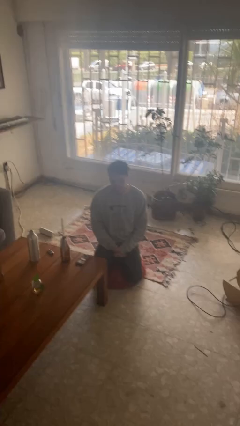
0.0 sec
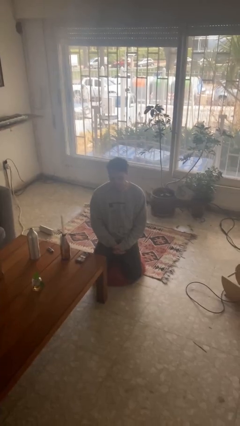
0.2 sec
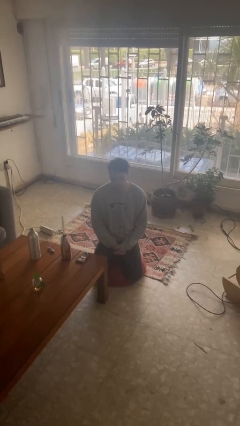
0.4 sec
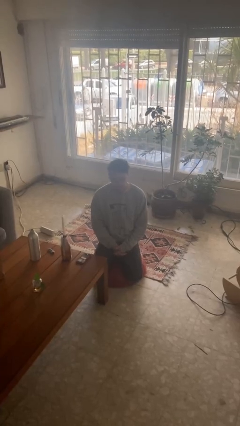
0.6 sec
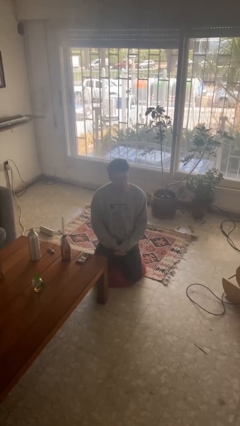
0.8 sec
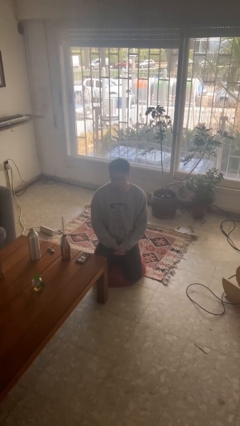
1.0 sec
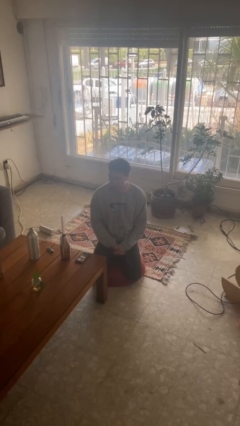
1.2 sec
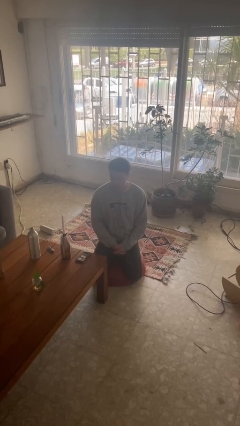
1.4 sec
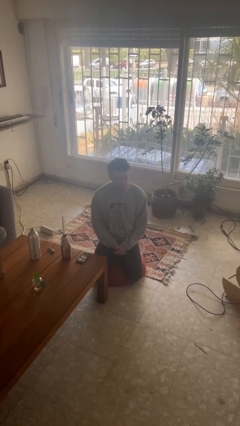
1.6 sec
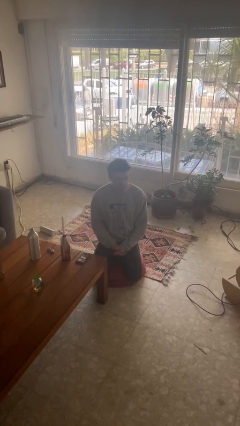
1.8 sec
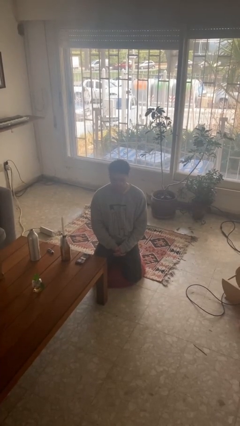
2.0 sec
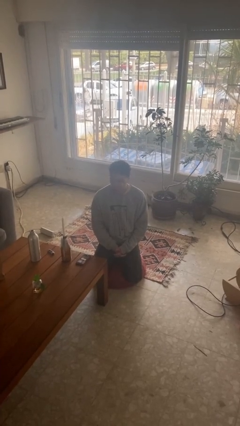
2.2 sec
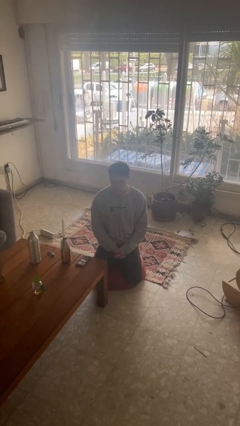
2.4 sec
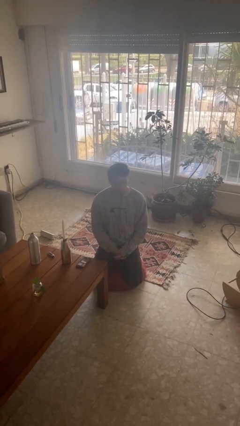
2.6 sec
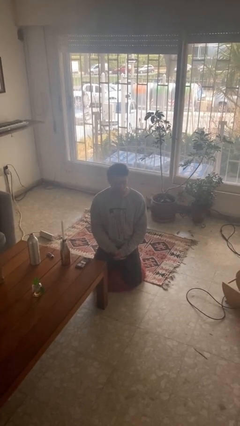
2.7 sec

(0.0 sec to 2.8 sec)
person shakes head

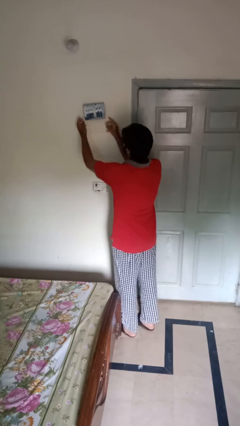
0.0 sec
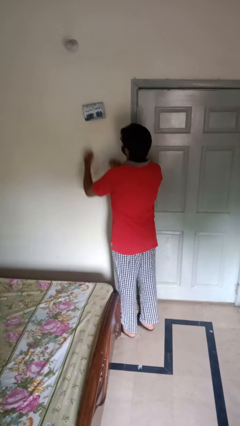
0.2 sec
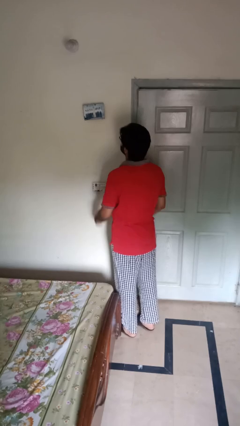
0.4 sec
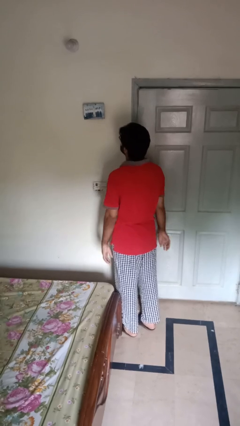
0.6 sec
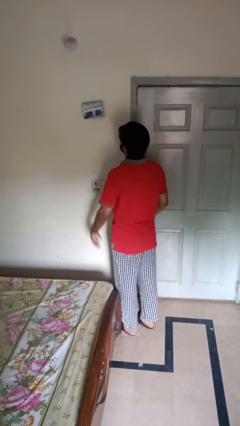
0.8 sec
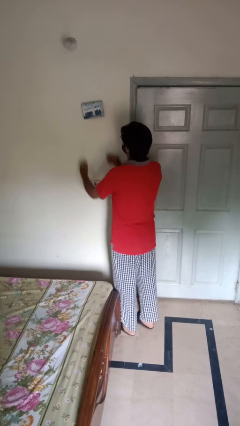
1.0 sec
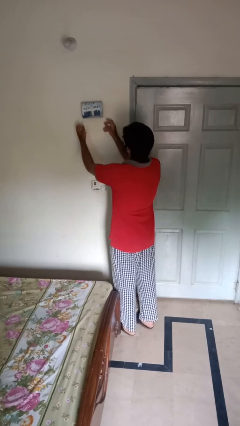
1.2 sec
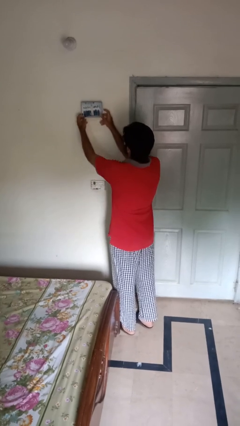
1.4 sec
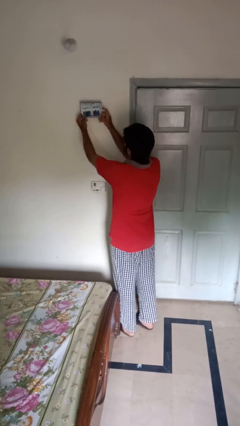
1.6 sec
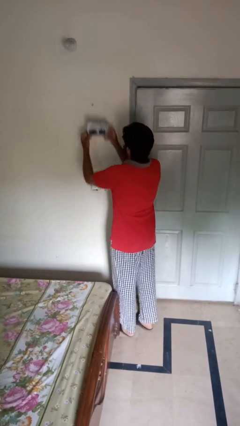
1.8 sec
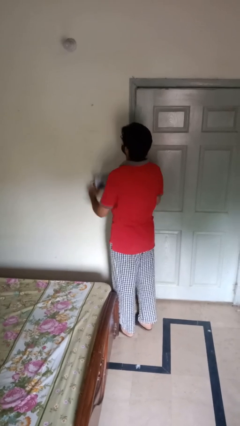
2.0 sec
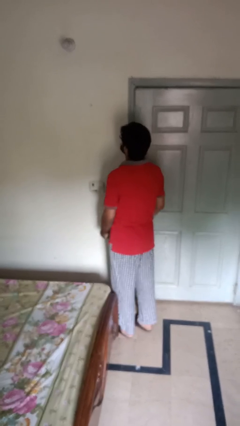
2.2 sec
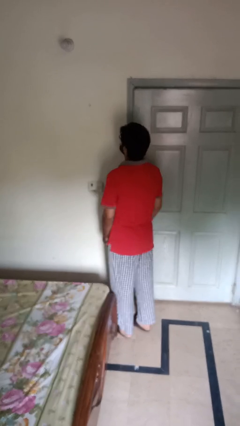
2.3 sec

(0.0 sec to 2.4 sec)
person takes down picture frame

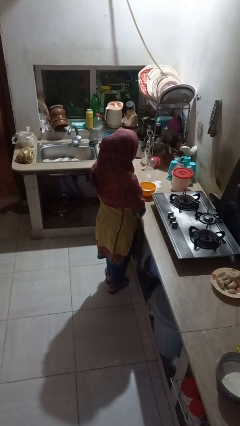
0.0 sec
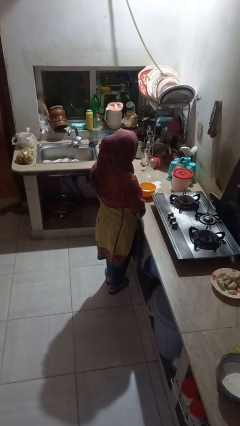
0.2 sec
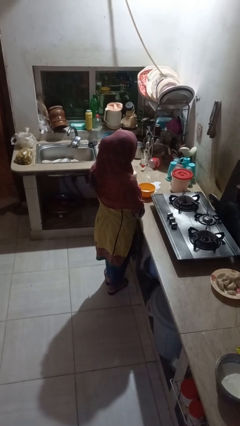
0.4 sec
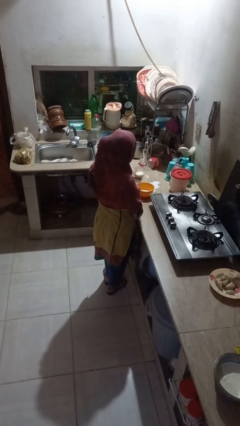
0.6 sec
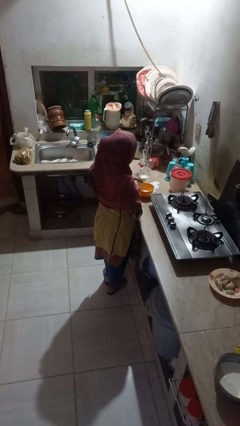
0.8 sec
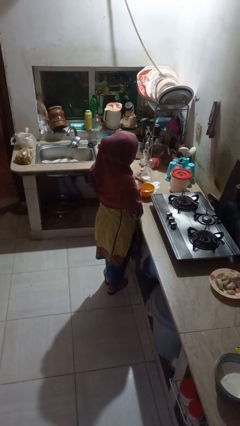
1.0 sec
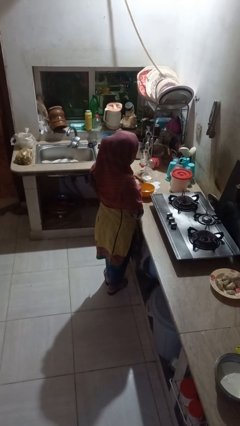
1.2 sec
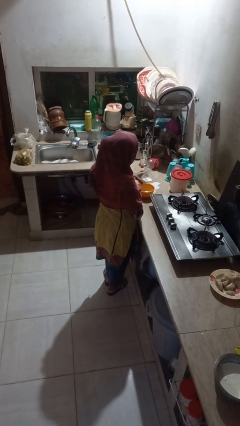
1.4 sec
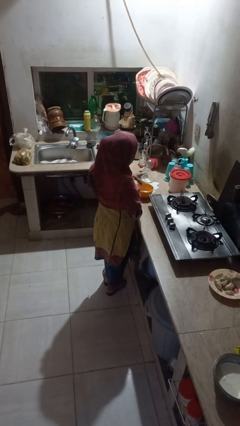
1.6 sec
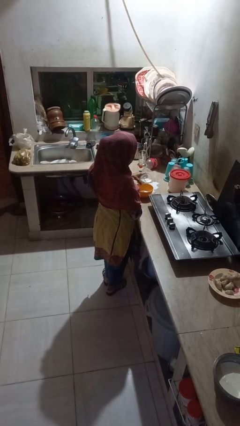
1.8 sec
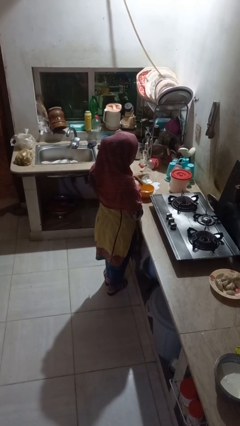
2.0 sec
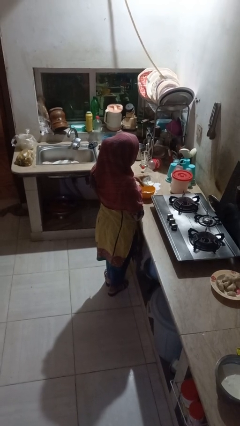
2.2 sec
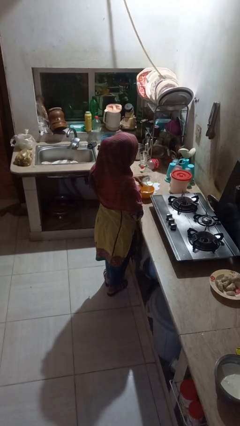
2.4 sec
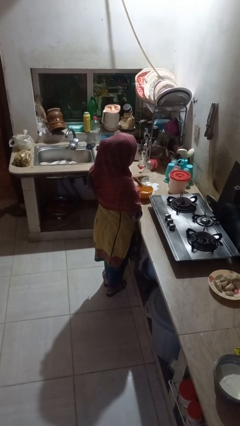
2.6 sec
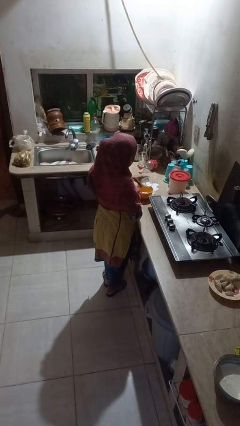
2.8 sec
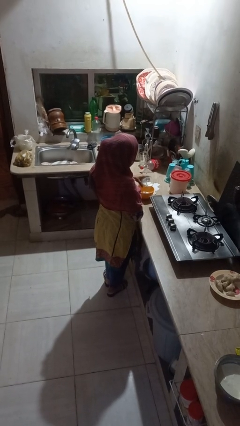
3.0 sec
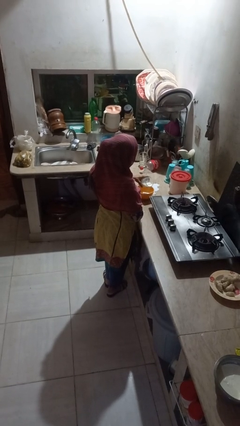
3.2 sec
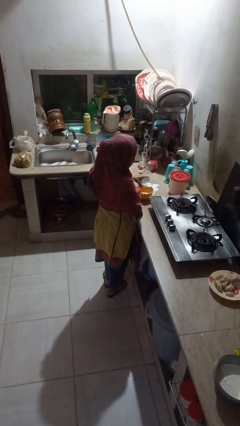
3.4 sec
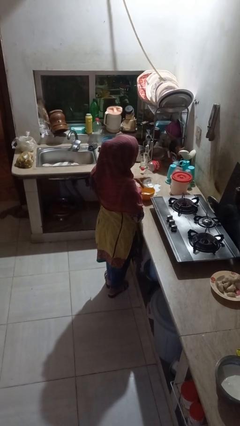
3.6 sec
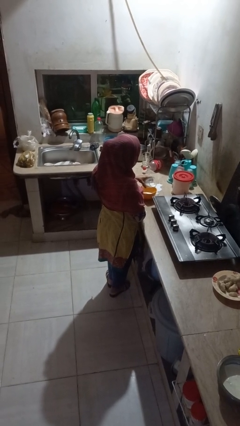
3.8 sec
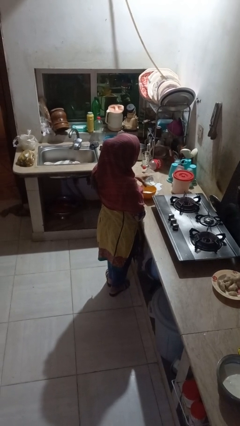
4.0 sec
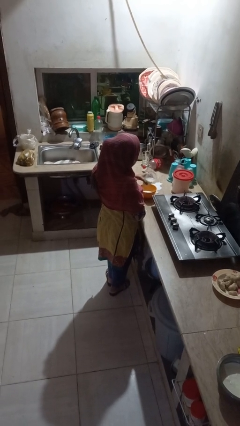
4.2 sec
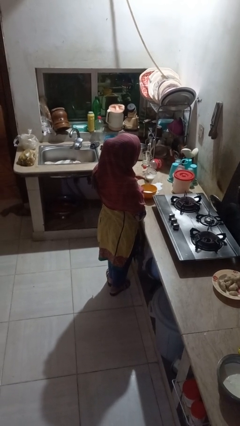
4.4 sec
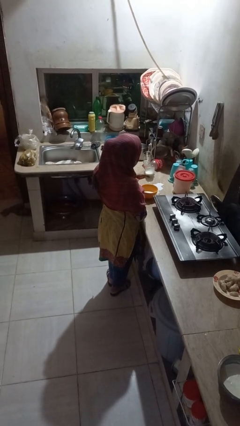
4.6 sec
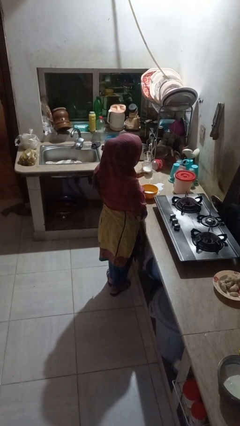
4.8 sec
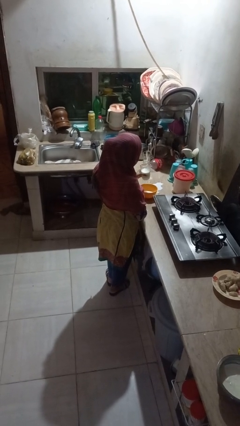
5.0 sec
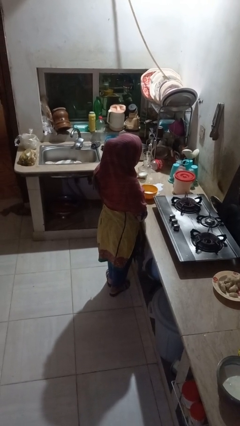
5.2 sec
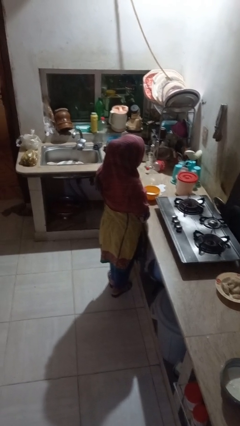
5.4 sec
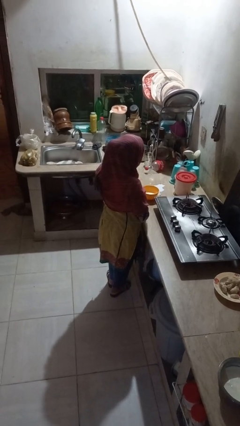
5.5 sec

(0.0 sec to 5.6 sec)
person pours into bowl

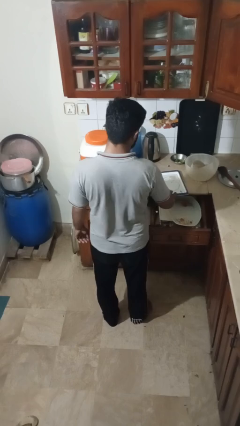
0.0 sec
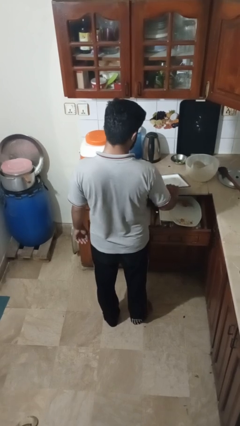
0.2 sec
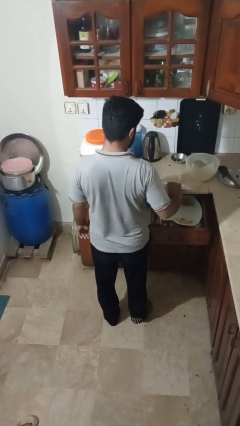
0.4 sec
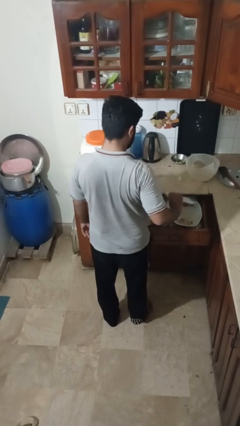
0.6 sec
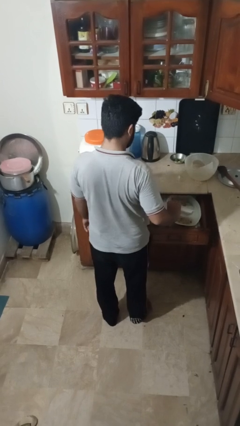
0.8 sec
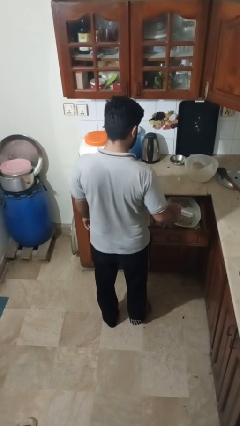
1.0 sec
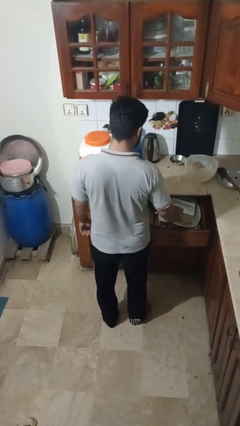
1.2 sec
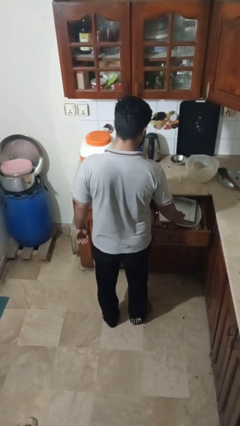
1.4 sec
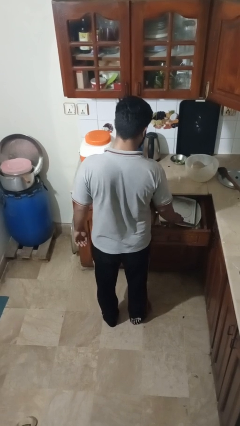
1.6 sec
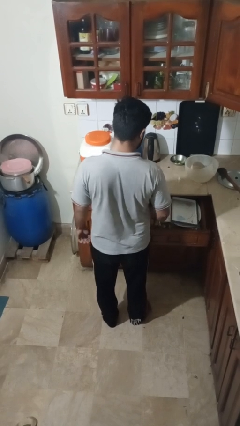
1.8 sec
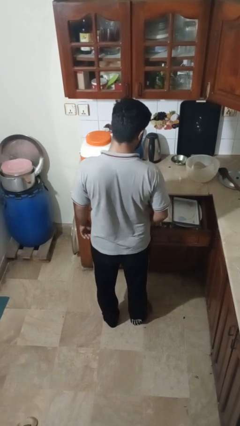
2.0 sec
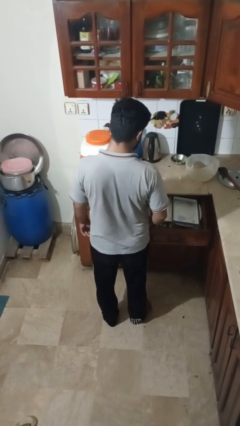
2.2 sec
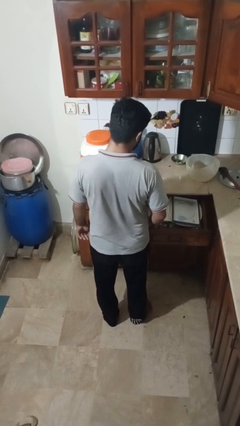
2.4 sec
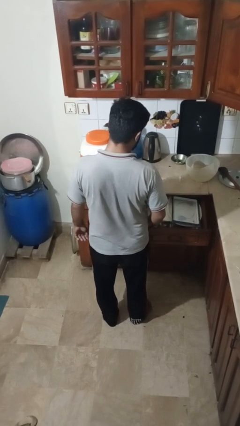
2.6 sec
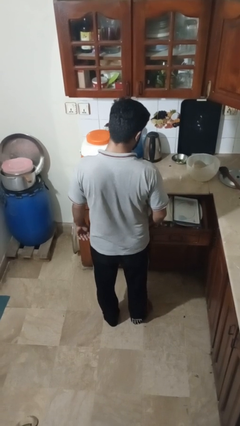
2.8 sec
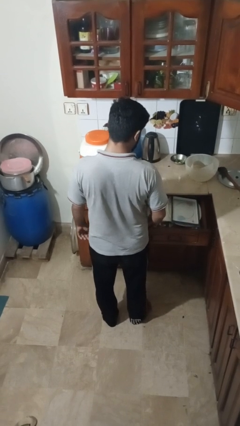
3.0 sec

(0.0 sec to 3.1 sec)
person puts object into kitchen drawer

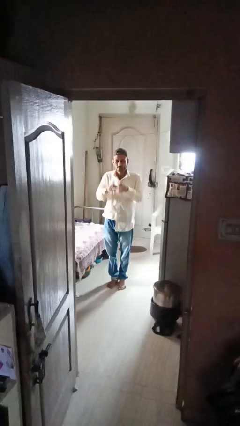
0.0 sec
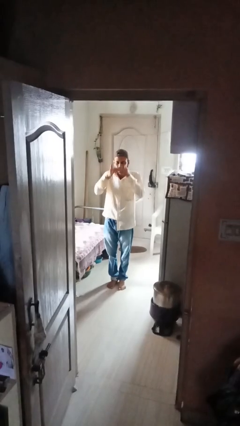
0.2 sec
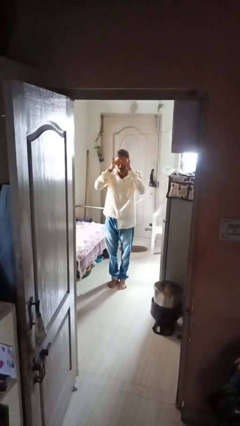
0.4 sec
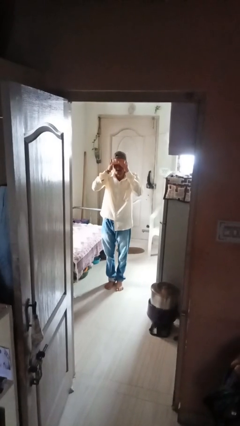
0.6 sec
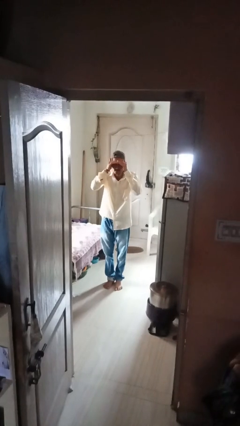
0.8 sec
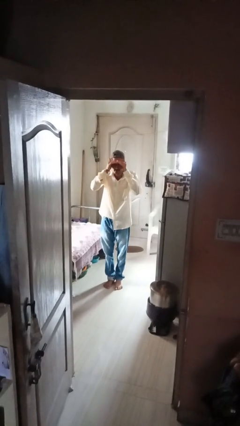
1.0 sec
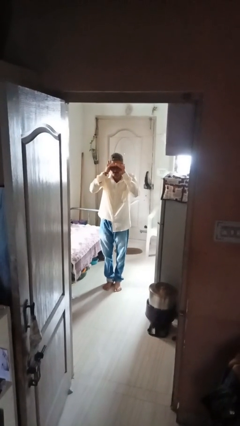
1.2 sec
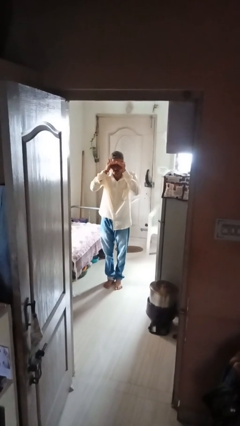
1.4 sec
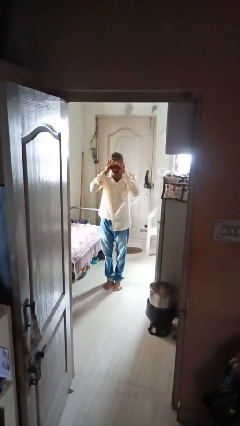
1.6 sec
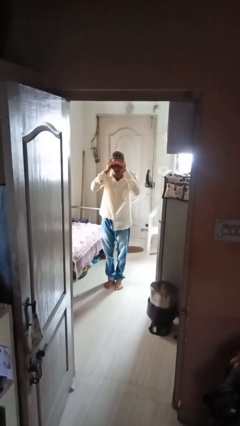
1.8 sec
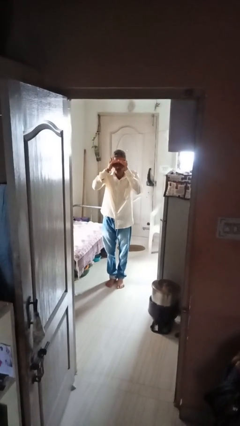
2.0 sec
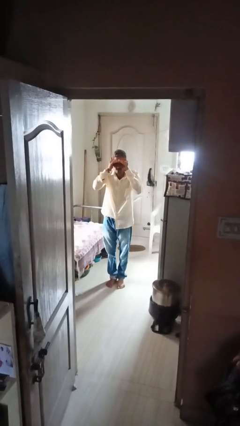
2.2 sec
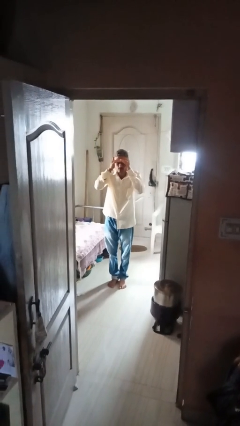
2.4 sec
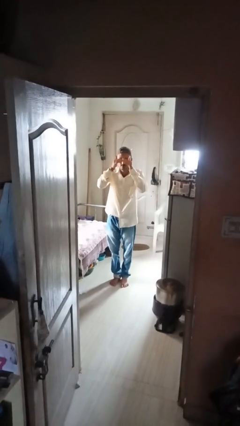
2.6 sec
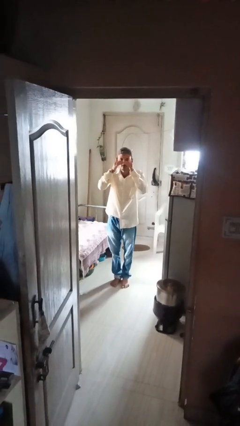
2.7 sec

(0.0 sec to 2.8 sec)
person shades eyes

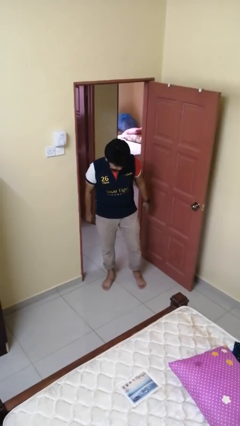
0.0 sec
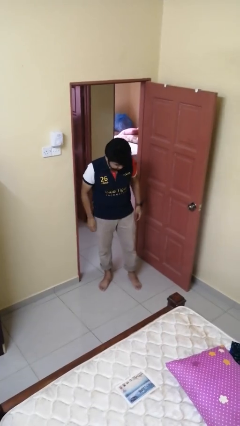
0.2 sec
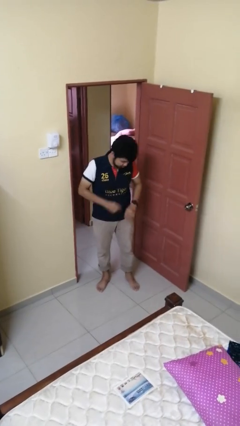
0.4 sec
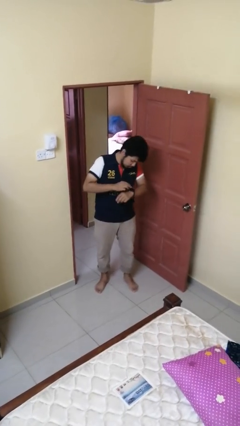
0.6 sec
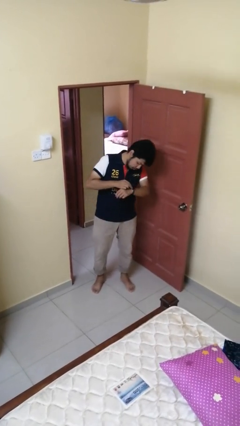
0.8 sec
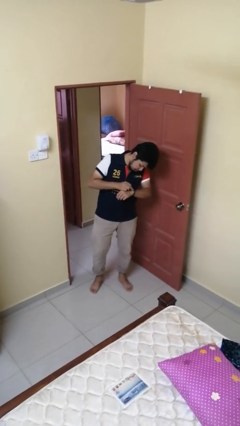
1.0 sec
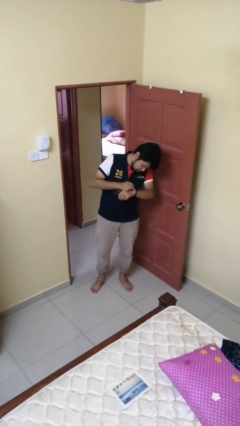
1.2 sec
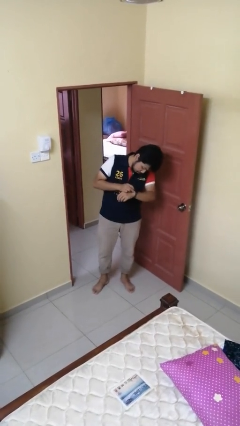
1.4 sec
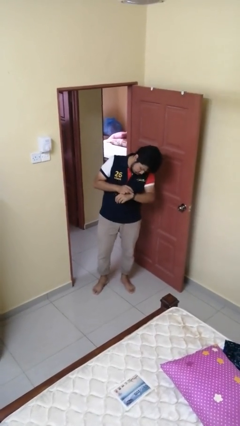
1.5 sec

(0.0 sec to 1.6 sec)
person looks at wristwatch
